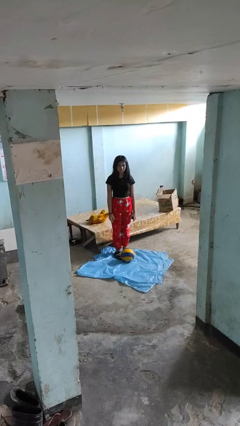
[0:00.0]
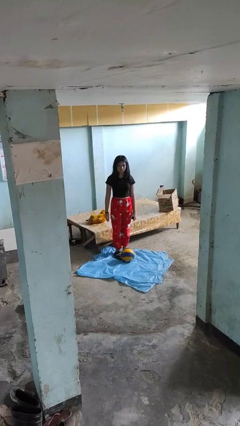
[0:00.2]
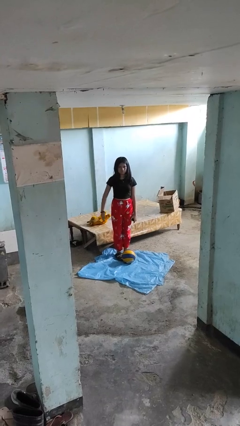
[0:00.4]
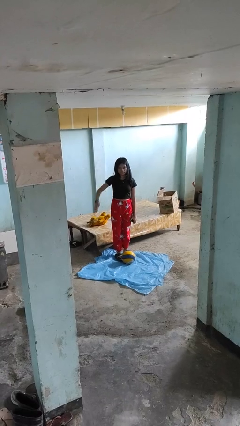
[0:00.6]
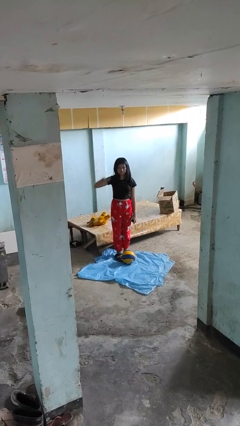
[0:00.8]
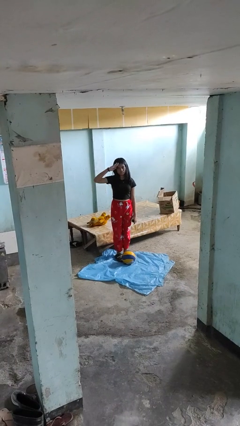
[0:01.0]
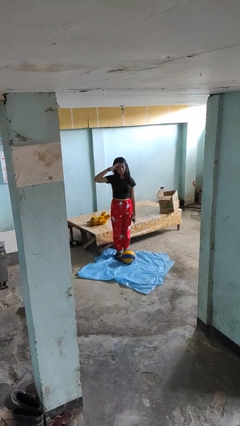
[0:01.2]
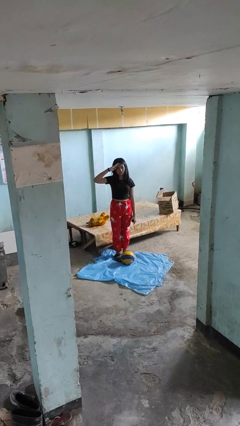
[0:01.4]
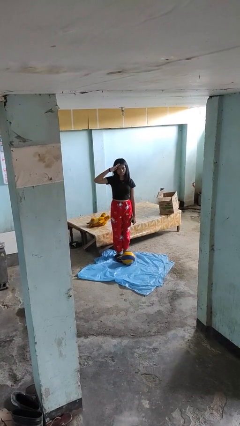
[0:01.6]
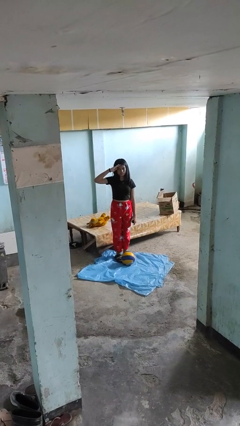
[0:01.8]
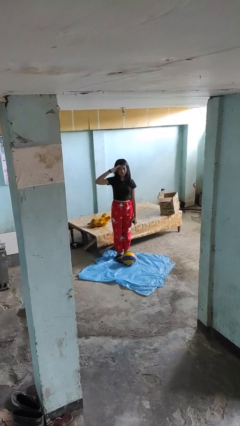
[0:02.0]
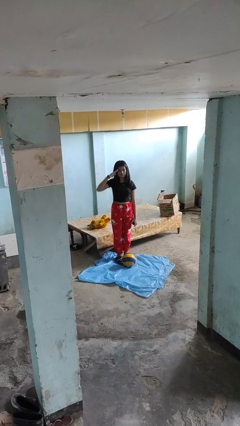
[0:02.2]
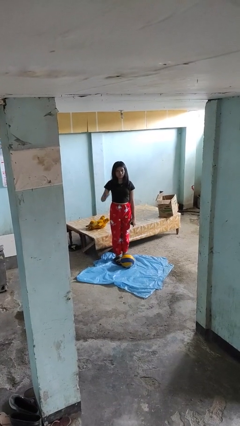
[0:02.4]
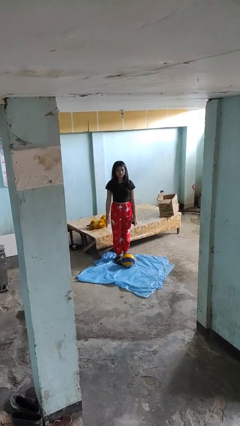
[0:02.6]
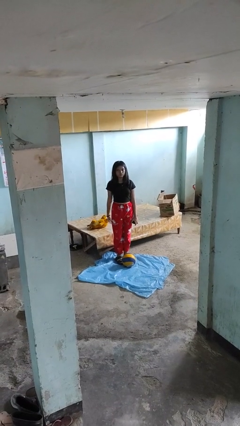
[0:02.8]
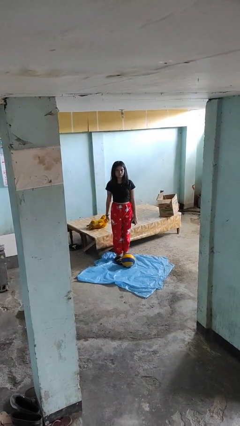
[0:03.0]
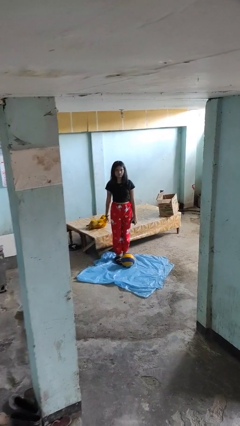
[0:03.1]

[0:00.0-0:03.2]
person salutes

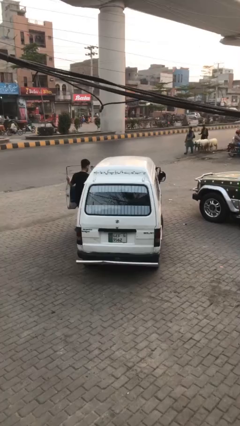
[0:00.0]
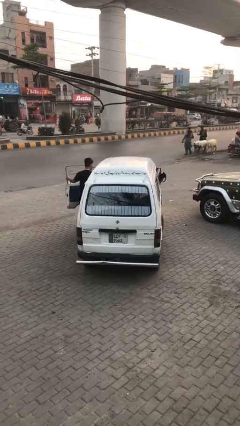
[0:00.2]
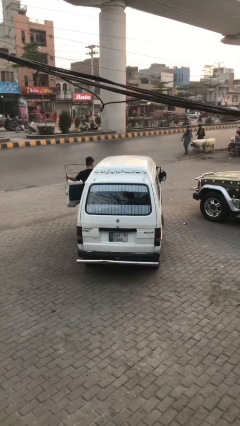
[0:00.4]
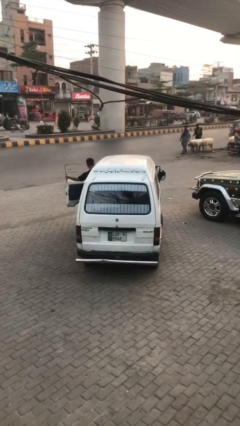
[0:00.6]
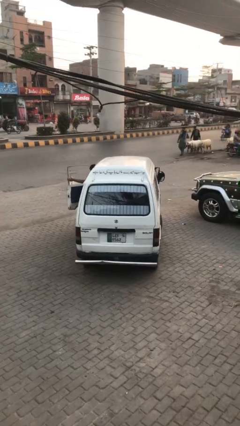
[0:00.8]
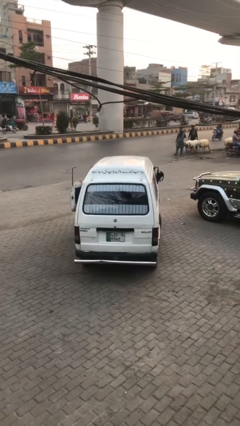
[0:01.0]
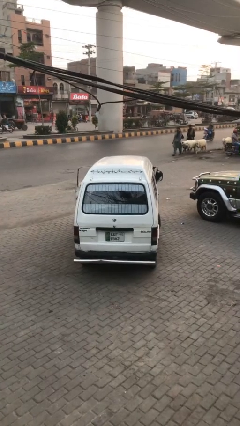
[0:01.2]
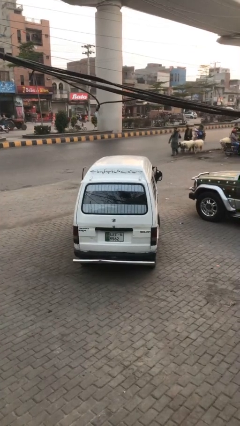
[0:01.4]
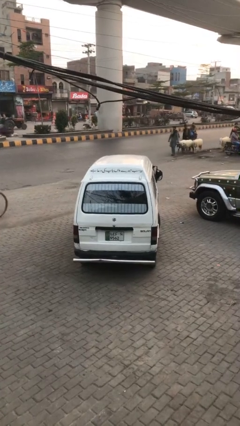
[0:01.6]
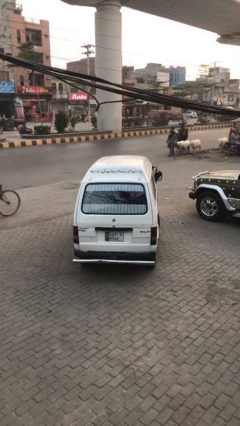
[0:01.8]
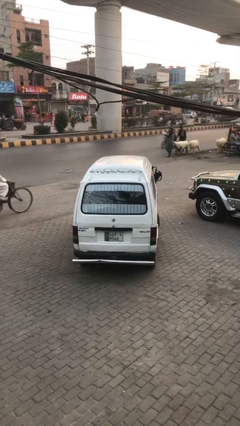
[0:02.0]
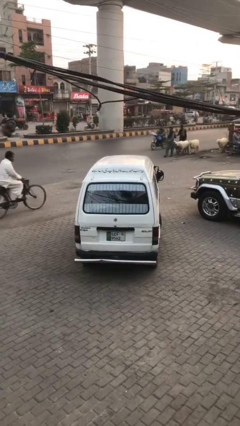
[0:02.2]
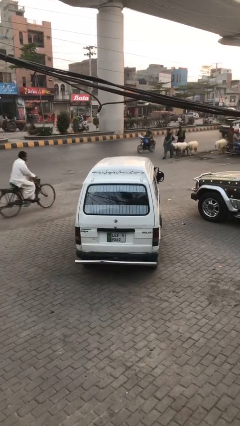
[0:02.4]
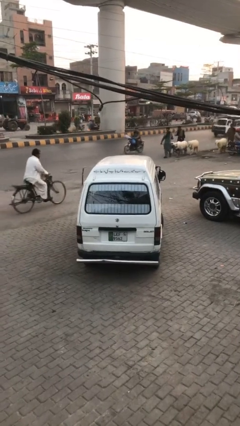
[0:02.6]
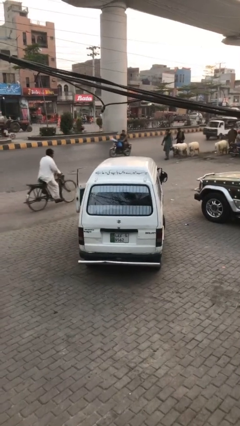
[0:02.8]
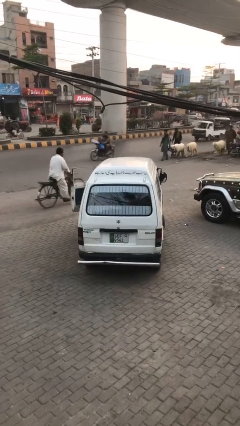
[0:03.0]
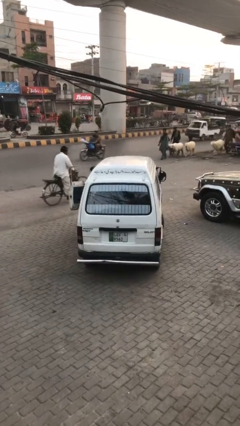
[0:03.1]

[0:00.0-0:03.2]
car picks up person

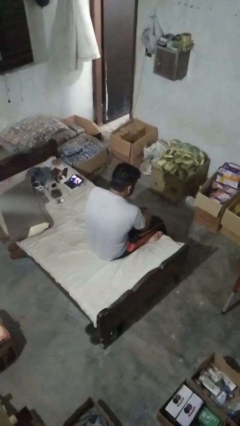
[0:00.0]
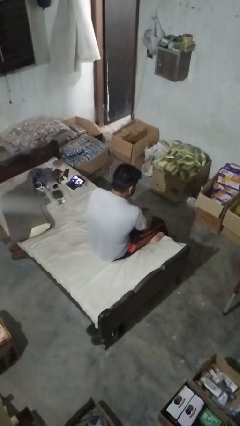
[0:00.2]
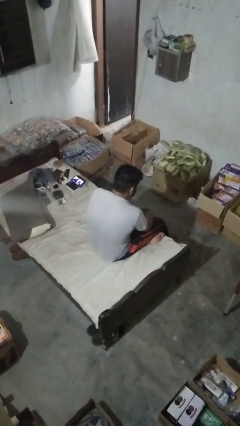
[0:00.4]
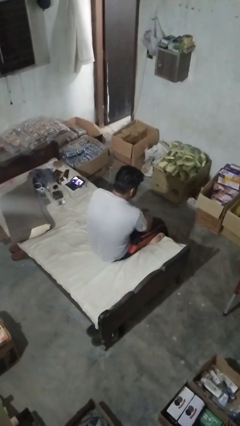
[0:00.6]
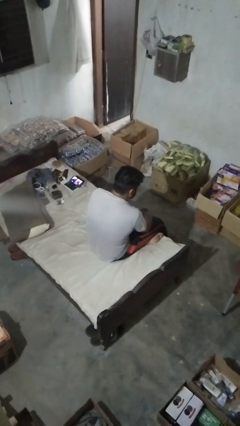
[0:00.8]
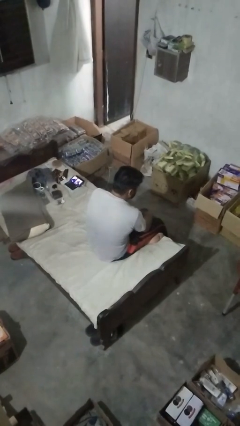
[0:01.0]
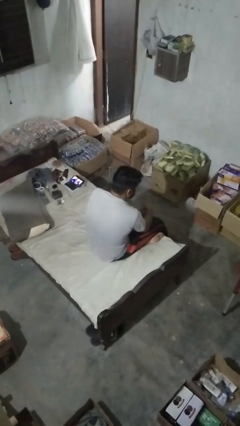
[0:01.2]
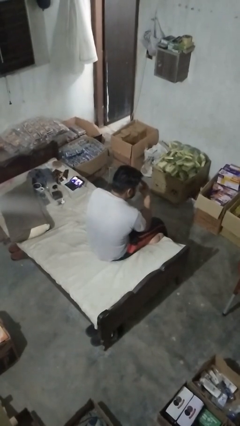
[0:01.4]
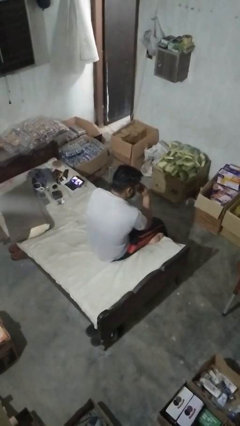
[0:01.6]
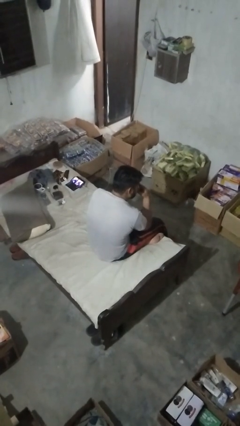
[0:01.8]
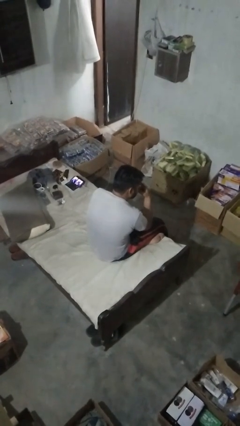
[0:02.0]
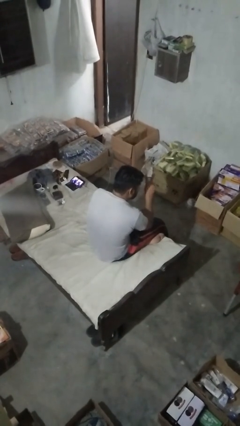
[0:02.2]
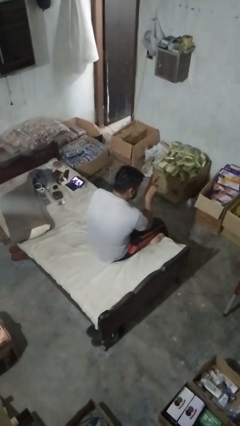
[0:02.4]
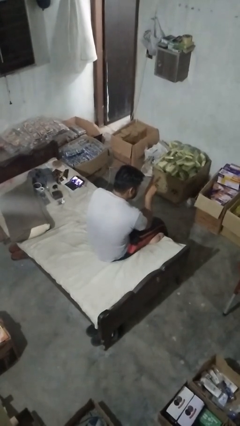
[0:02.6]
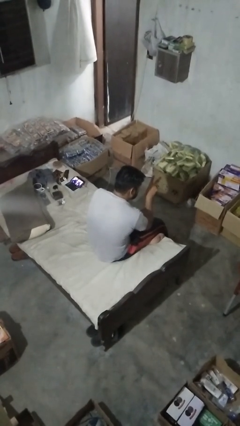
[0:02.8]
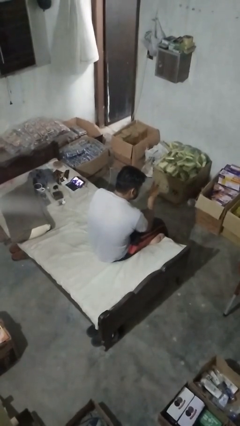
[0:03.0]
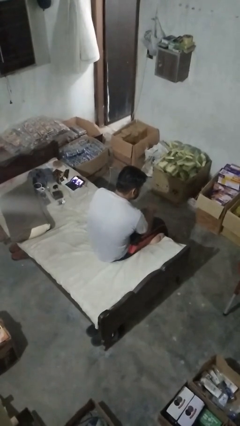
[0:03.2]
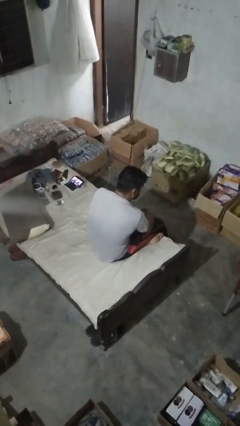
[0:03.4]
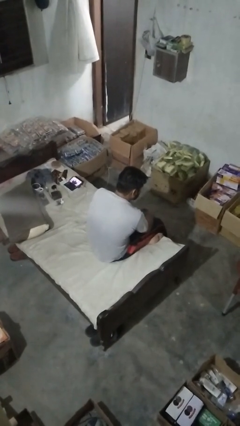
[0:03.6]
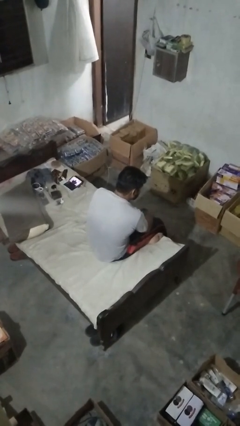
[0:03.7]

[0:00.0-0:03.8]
person gestures watch closely

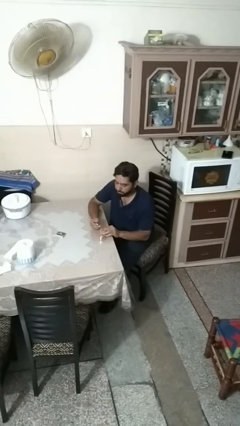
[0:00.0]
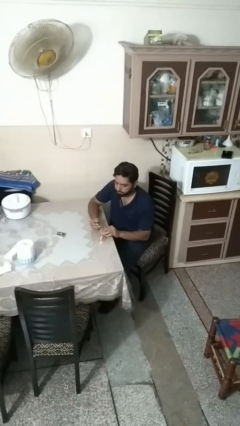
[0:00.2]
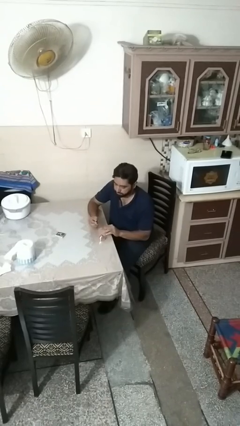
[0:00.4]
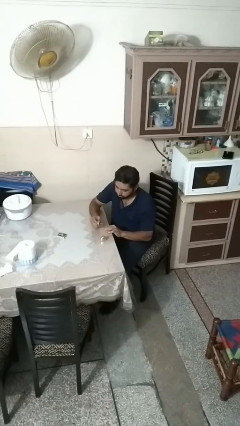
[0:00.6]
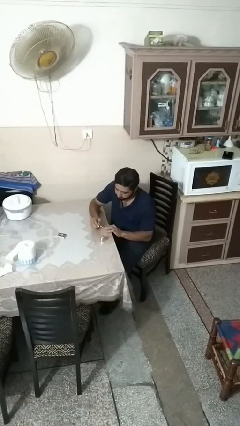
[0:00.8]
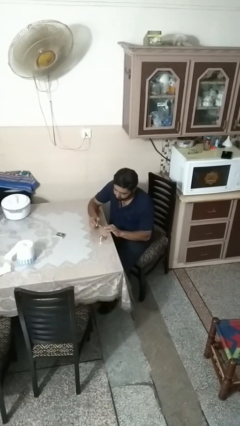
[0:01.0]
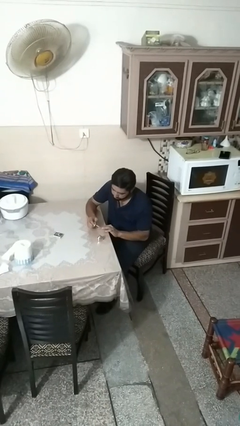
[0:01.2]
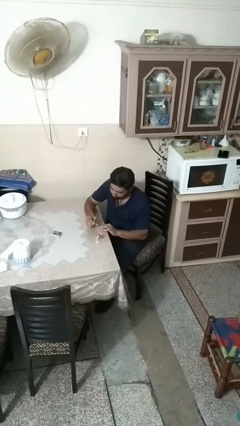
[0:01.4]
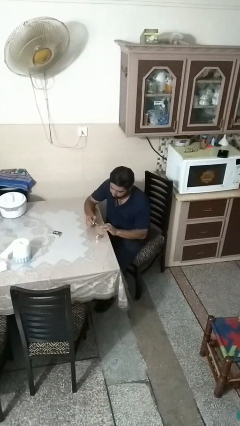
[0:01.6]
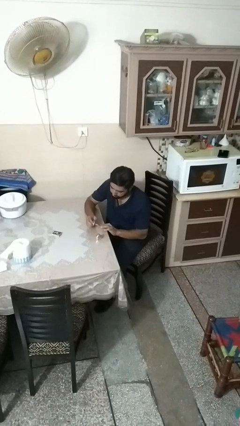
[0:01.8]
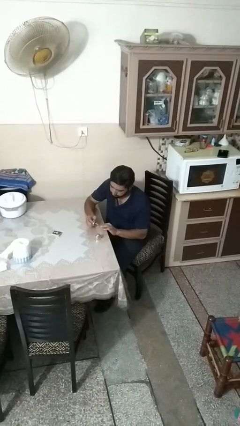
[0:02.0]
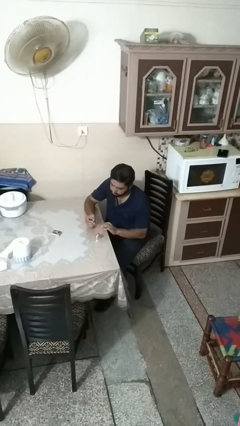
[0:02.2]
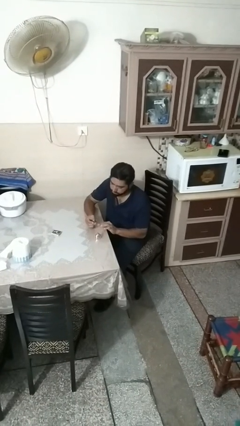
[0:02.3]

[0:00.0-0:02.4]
person paints fingernails

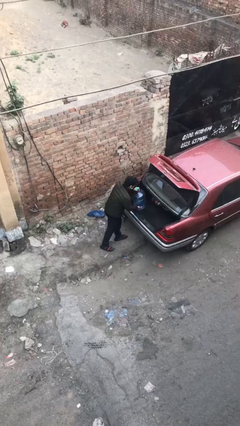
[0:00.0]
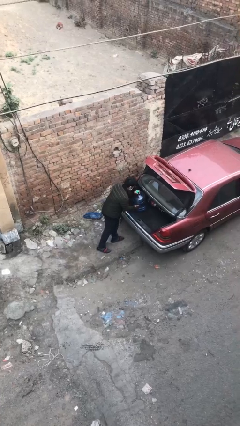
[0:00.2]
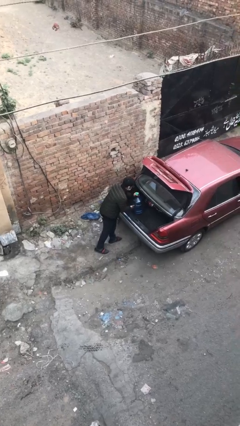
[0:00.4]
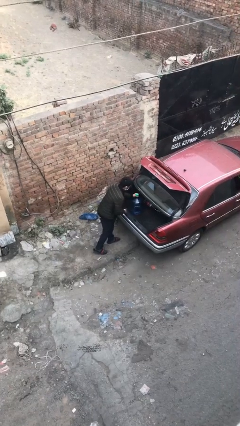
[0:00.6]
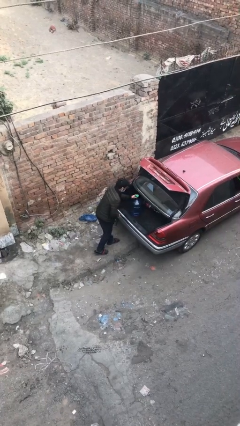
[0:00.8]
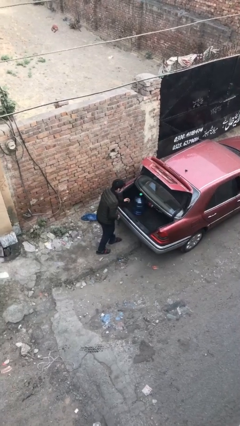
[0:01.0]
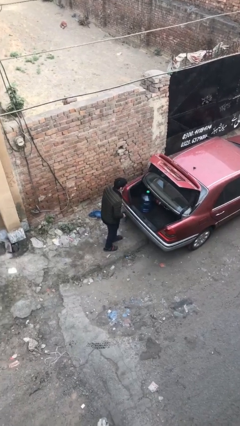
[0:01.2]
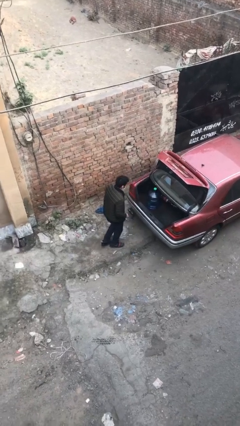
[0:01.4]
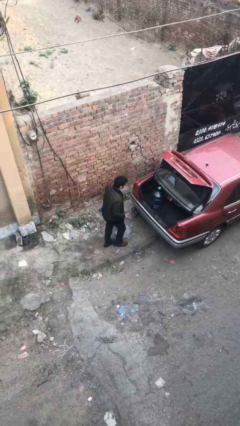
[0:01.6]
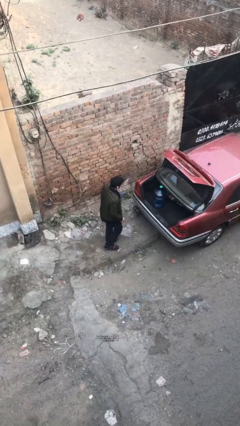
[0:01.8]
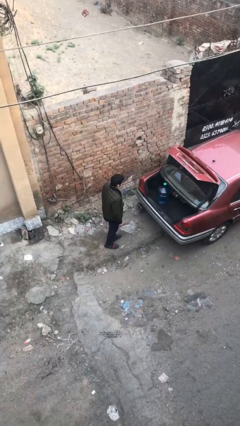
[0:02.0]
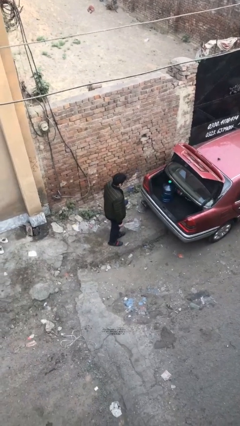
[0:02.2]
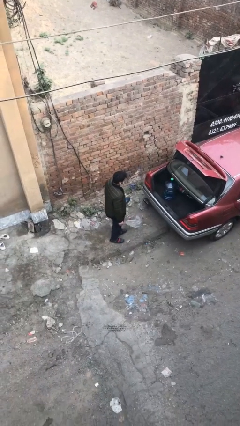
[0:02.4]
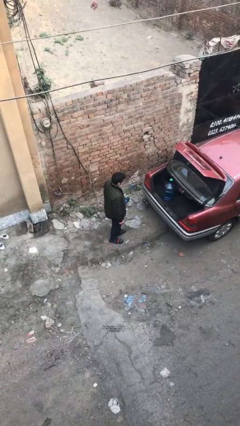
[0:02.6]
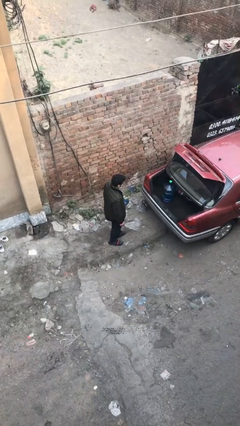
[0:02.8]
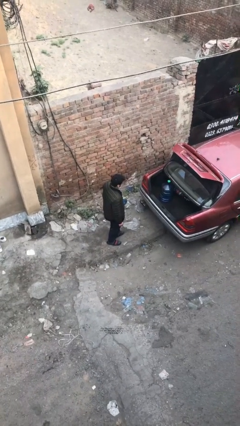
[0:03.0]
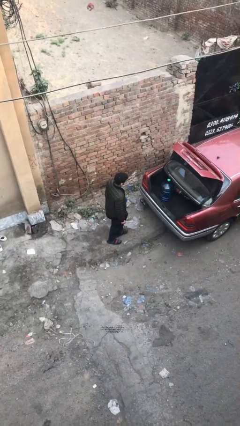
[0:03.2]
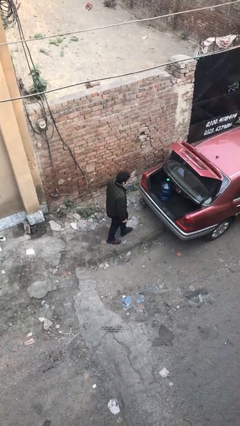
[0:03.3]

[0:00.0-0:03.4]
person loads car

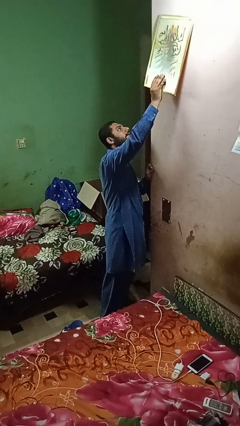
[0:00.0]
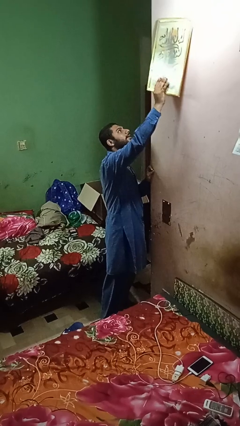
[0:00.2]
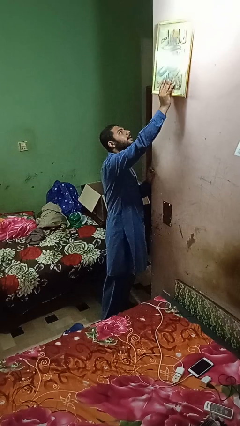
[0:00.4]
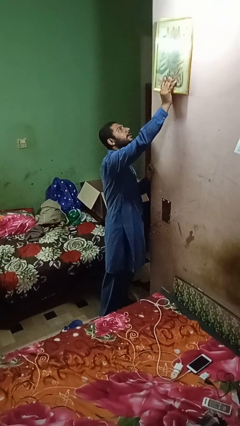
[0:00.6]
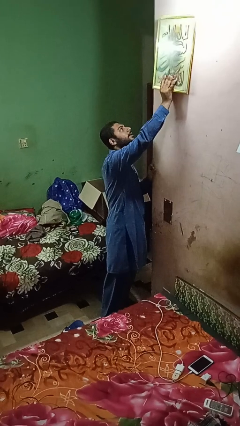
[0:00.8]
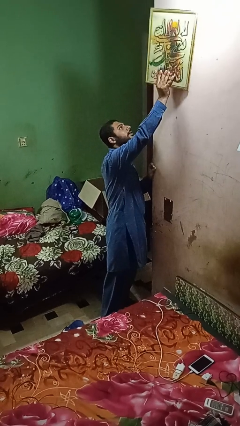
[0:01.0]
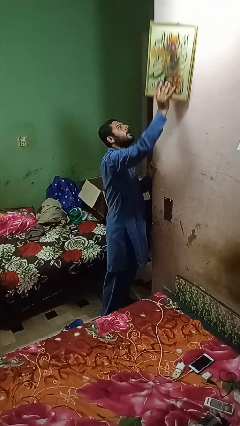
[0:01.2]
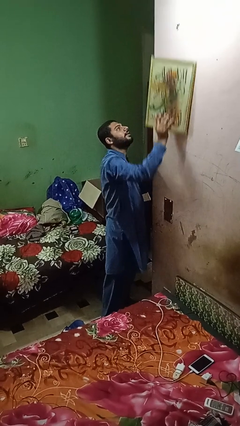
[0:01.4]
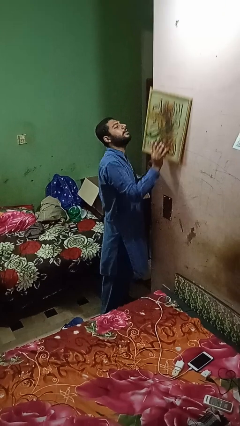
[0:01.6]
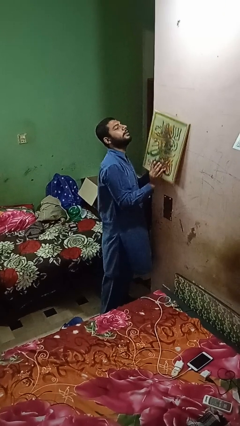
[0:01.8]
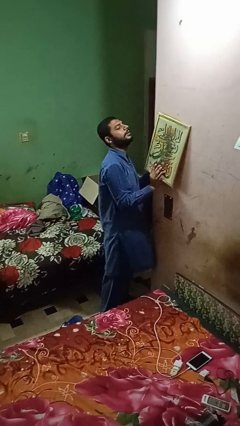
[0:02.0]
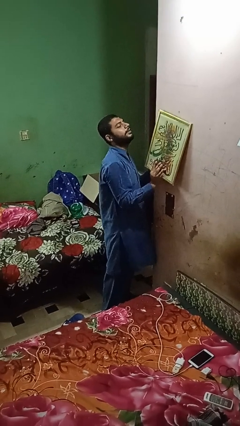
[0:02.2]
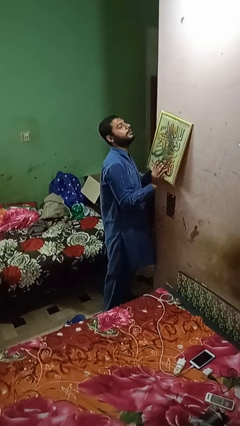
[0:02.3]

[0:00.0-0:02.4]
person takes down picture frame
